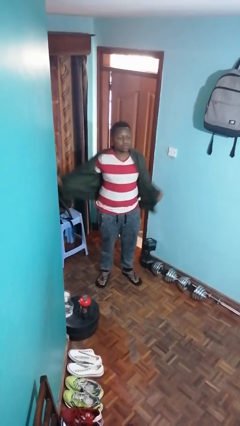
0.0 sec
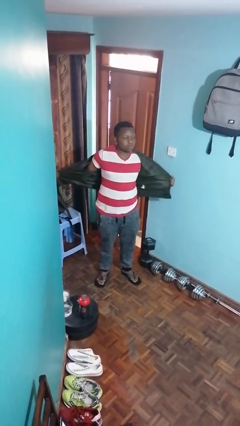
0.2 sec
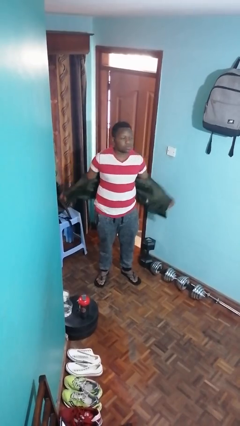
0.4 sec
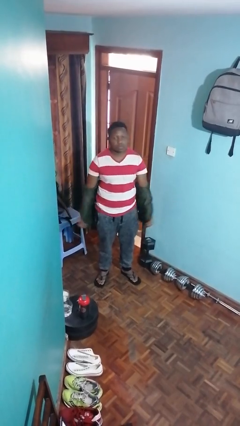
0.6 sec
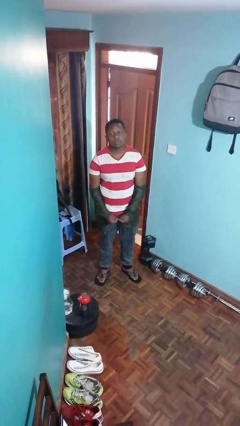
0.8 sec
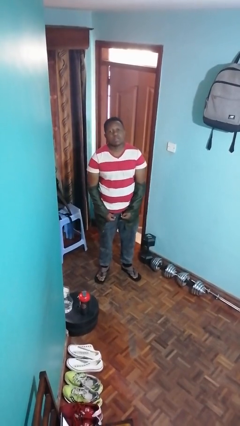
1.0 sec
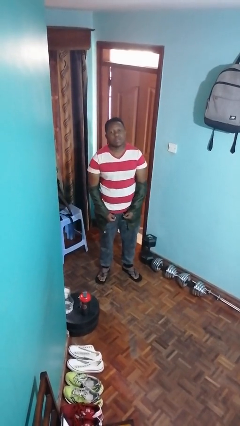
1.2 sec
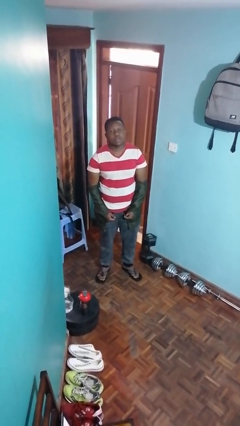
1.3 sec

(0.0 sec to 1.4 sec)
person takes off jacket

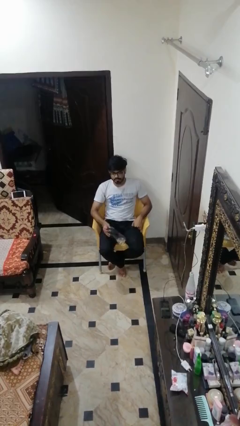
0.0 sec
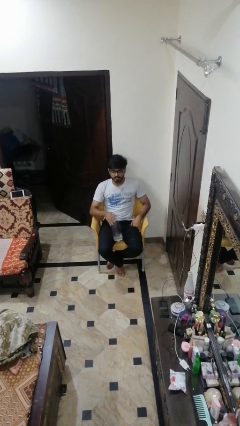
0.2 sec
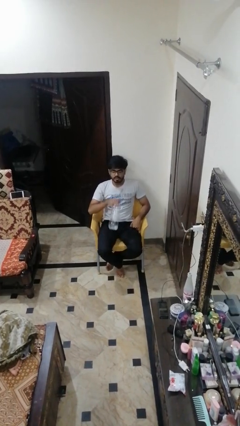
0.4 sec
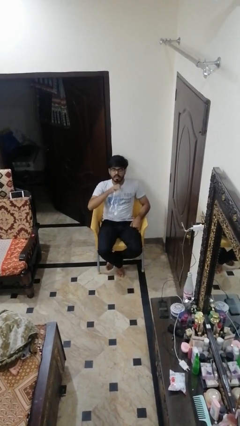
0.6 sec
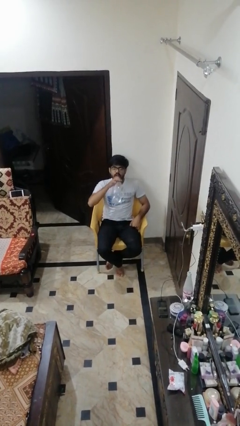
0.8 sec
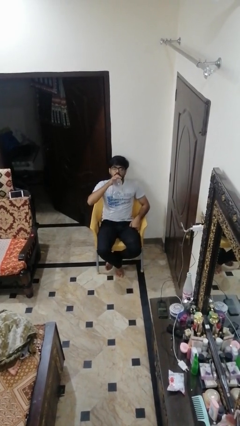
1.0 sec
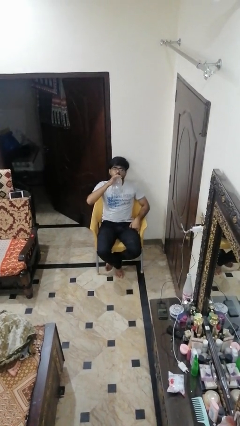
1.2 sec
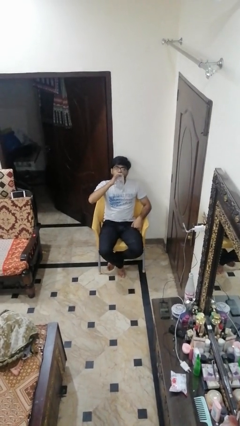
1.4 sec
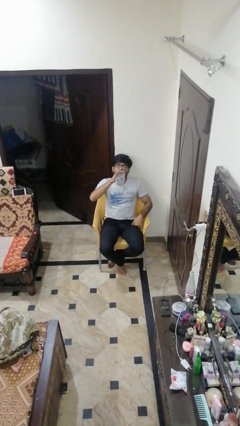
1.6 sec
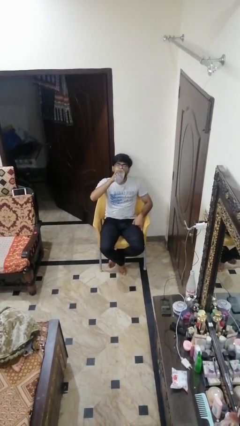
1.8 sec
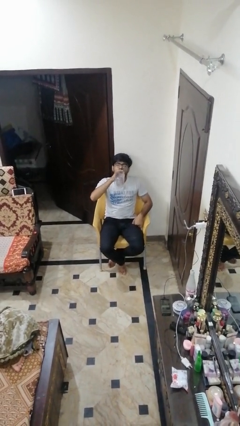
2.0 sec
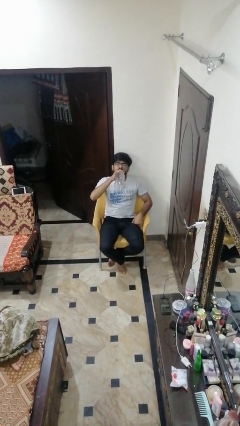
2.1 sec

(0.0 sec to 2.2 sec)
person picks up object from floor

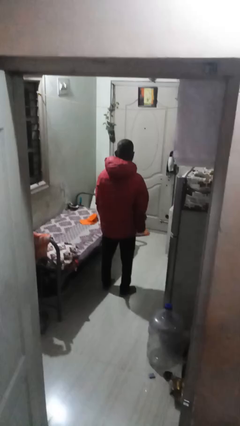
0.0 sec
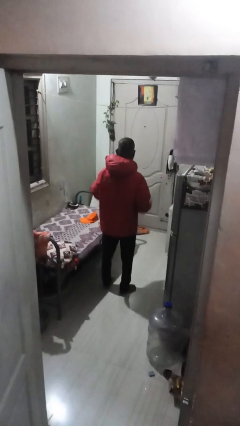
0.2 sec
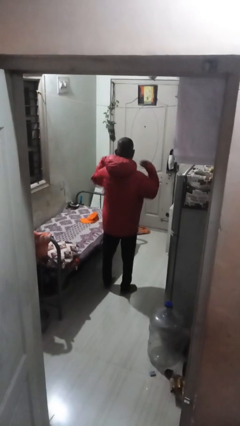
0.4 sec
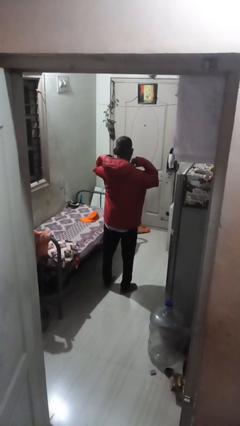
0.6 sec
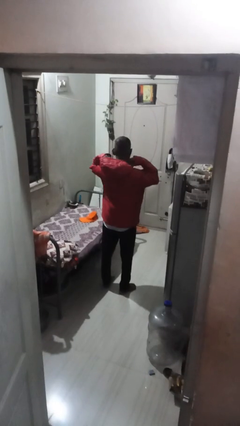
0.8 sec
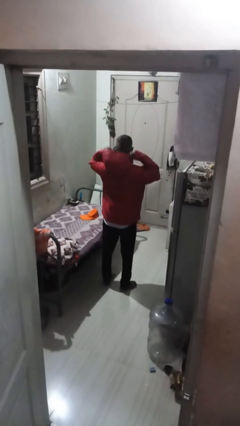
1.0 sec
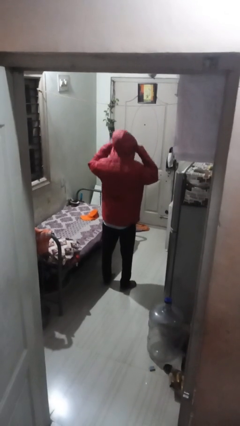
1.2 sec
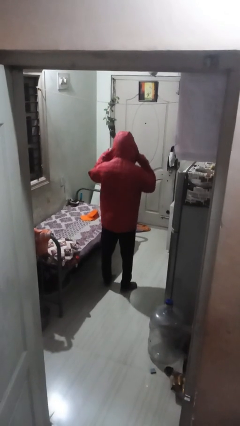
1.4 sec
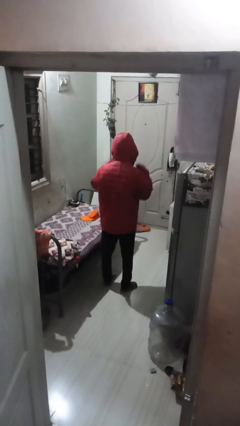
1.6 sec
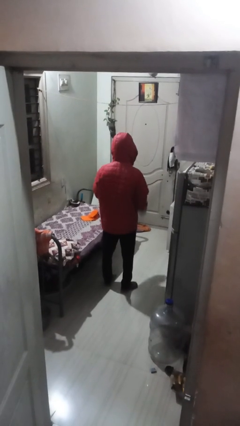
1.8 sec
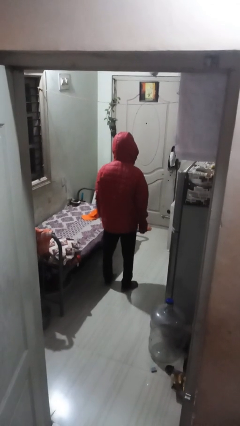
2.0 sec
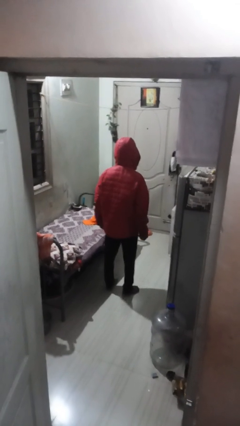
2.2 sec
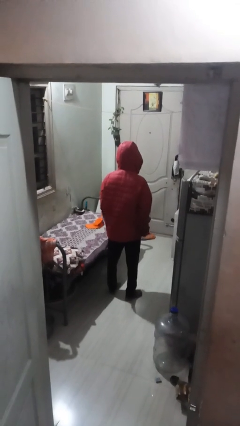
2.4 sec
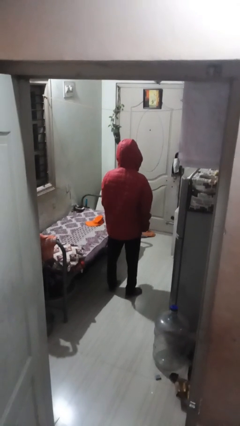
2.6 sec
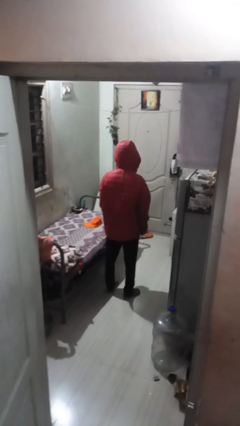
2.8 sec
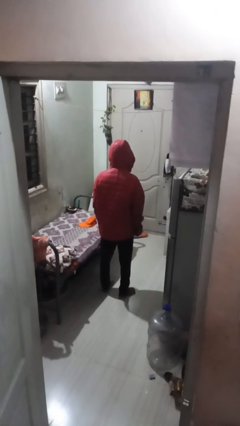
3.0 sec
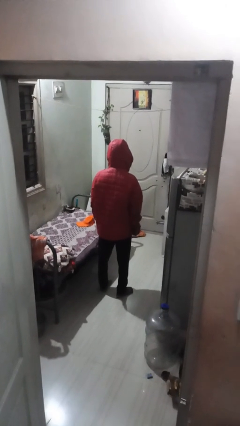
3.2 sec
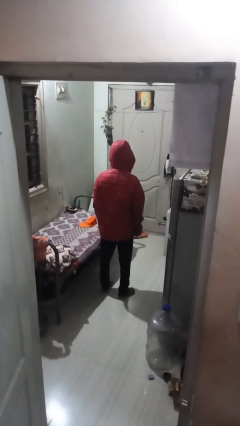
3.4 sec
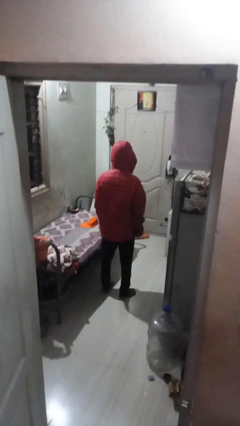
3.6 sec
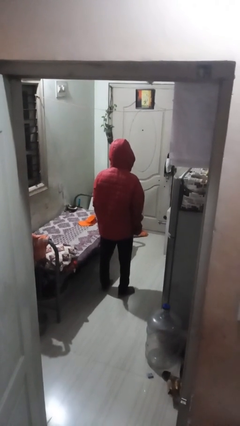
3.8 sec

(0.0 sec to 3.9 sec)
person puts on hoodie

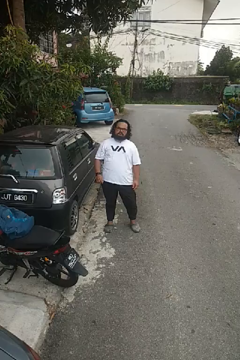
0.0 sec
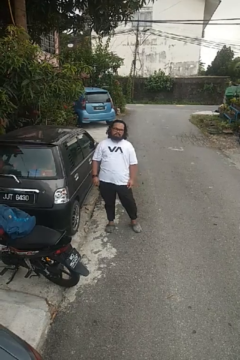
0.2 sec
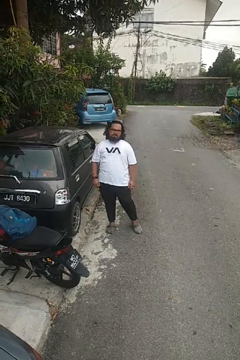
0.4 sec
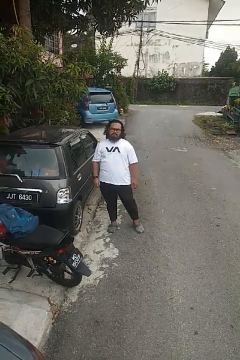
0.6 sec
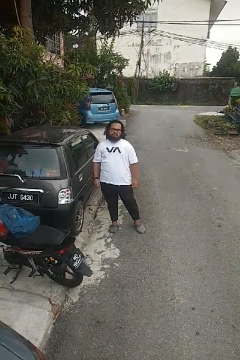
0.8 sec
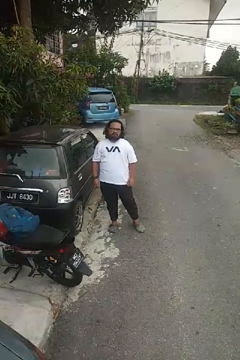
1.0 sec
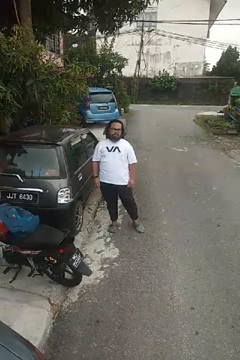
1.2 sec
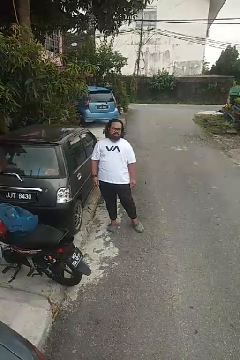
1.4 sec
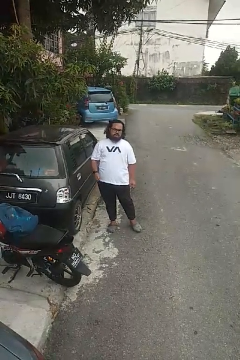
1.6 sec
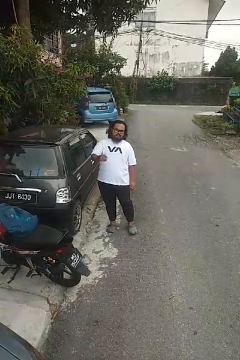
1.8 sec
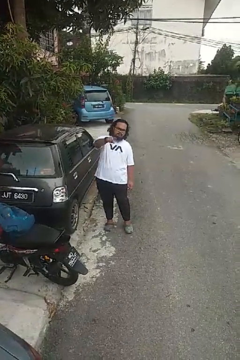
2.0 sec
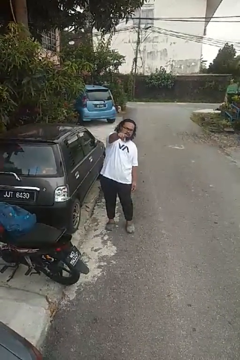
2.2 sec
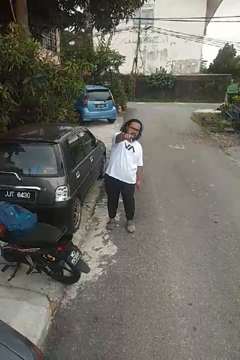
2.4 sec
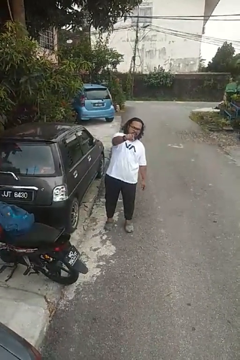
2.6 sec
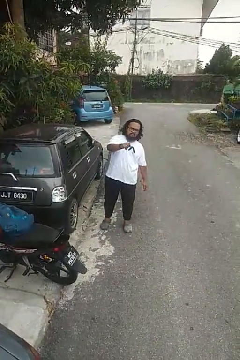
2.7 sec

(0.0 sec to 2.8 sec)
person points at person

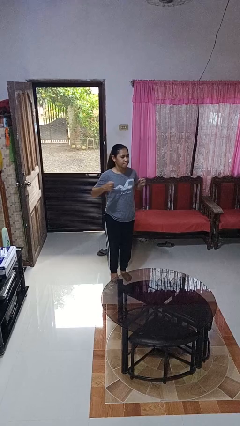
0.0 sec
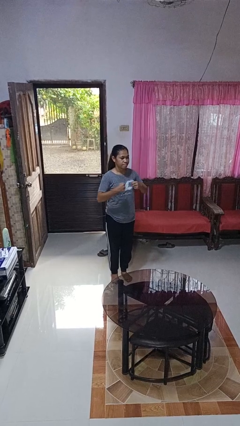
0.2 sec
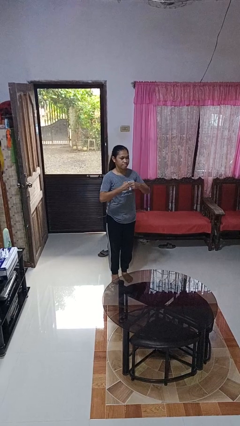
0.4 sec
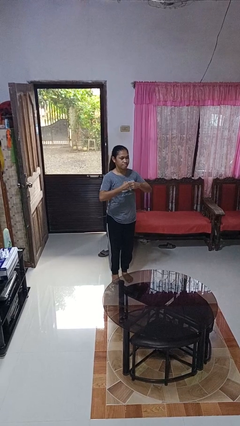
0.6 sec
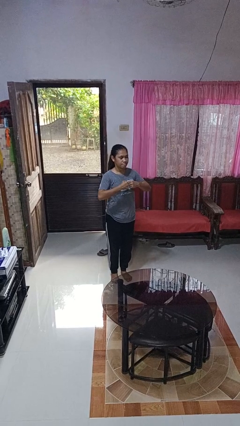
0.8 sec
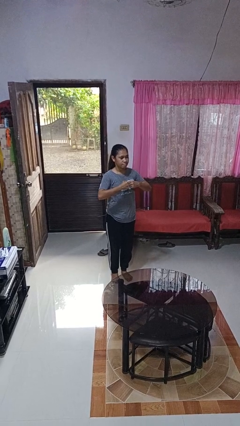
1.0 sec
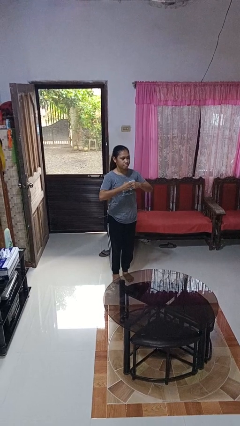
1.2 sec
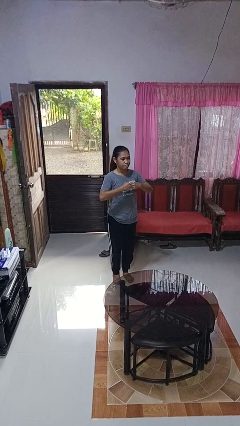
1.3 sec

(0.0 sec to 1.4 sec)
person gestures zoom out

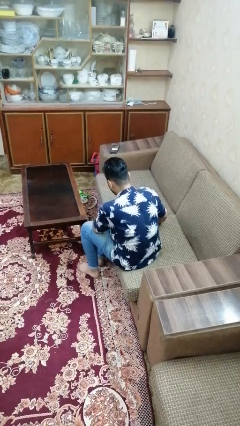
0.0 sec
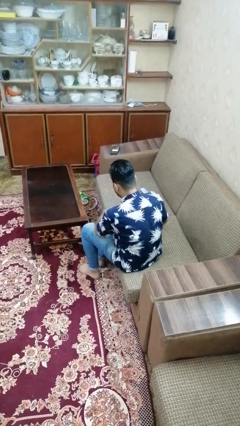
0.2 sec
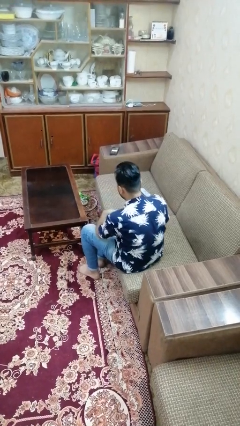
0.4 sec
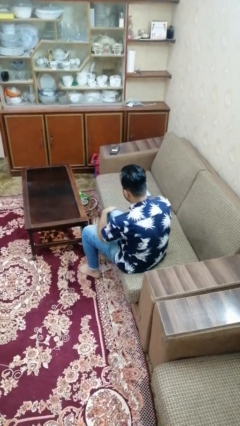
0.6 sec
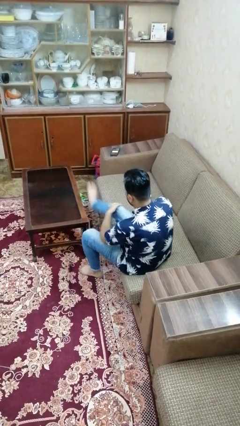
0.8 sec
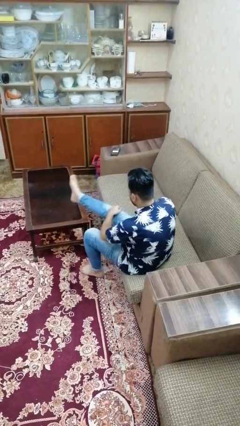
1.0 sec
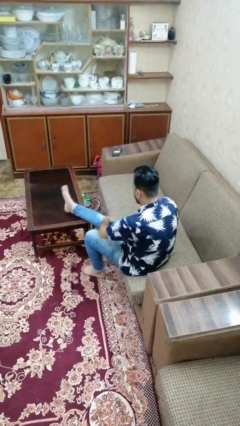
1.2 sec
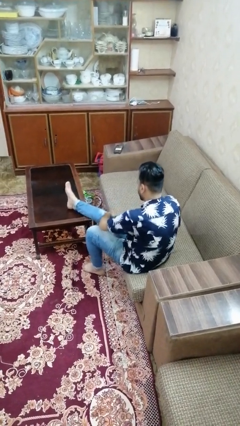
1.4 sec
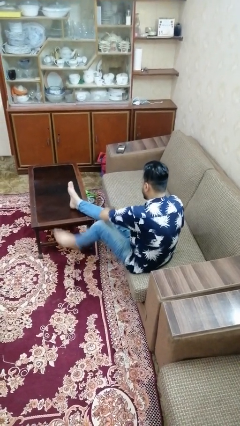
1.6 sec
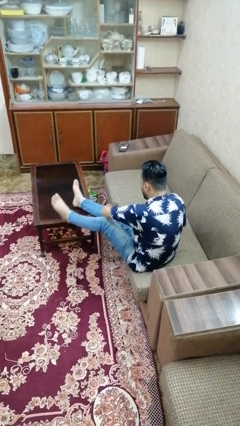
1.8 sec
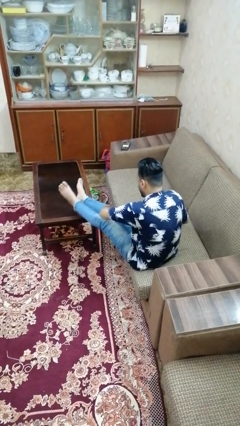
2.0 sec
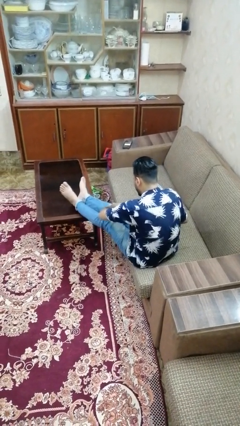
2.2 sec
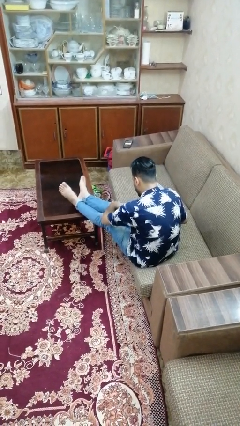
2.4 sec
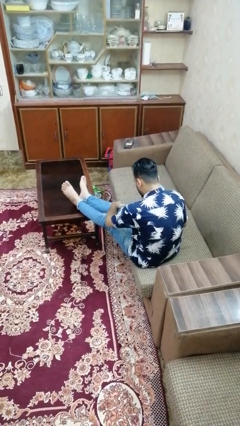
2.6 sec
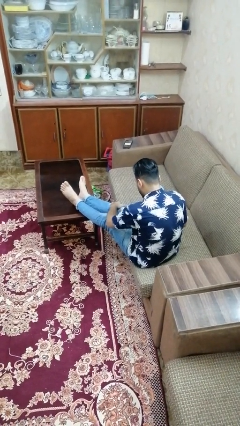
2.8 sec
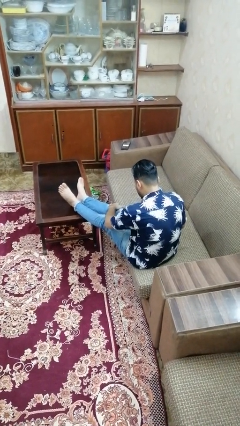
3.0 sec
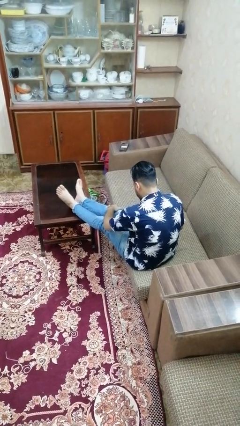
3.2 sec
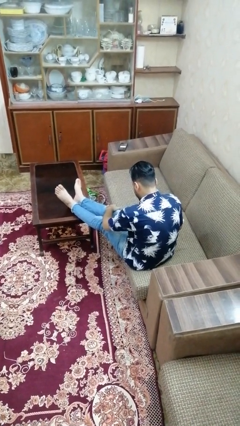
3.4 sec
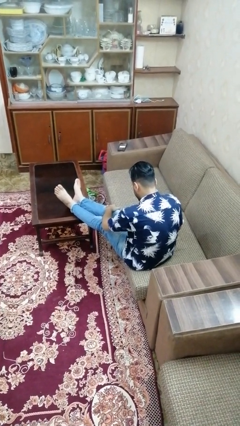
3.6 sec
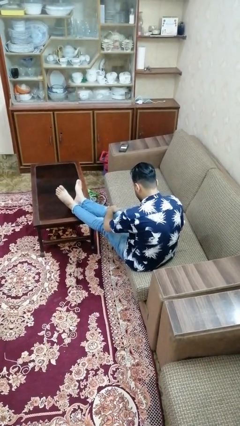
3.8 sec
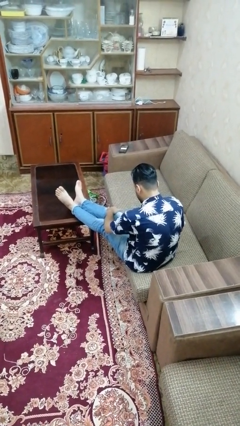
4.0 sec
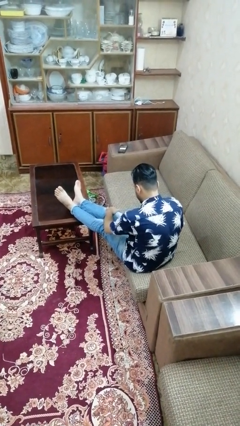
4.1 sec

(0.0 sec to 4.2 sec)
person puts feet up

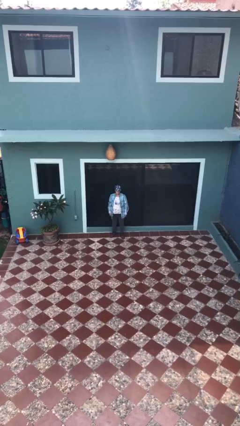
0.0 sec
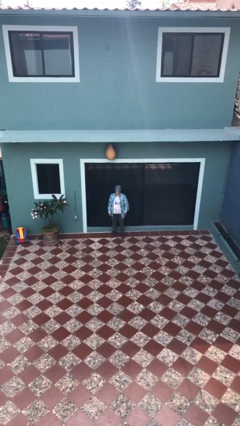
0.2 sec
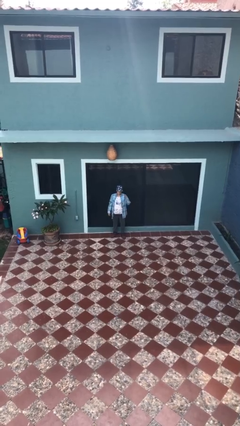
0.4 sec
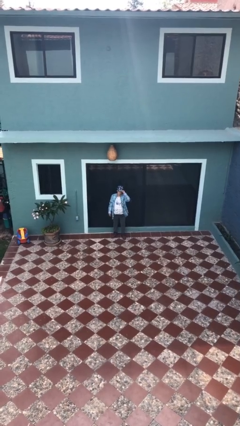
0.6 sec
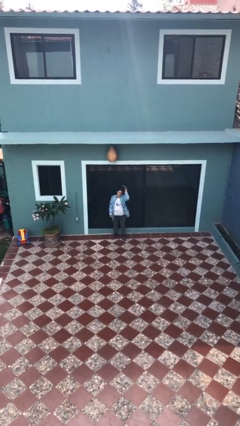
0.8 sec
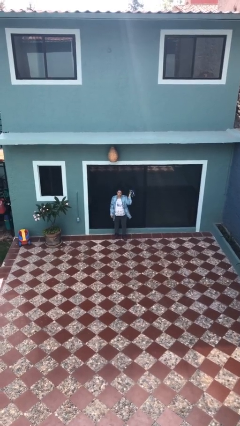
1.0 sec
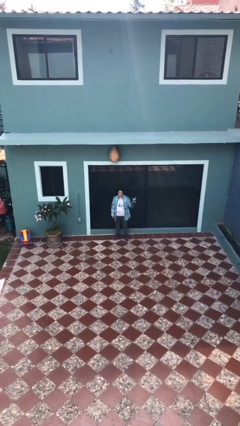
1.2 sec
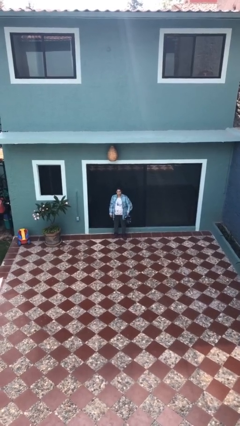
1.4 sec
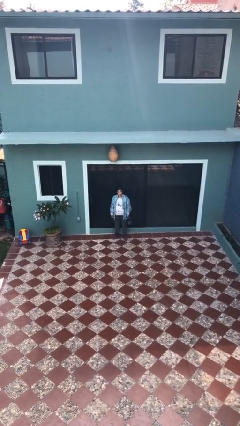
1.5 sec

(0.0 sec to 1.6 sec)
person takes off hat

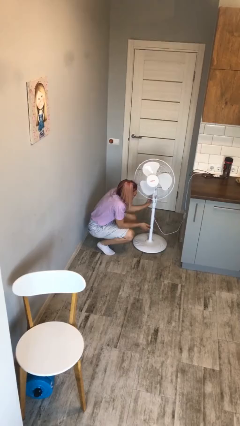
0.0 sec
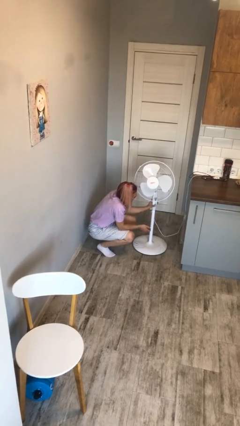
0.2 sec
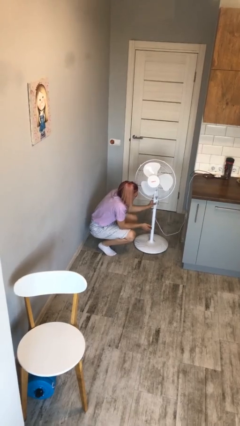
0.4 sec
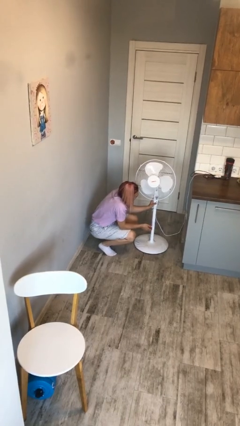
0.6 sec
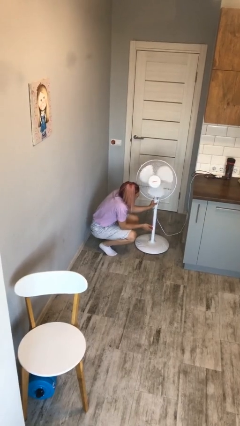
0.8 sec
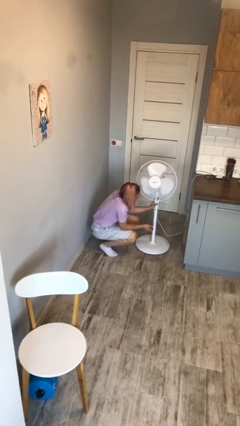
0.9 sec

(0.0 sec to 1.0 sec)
person turns on fan
